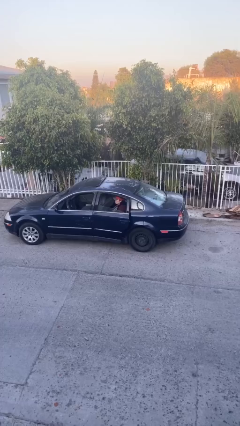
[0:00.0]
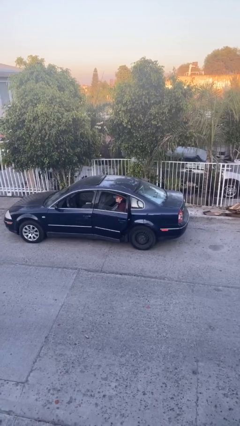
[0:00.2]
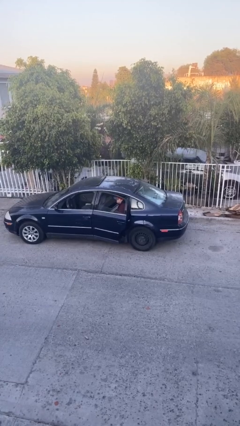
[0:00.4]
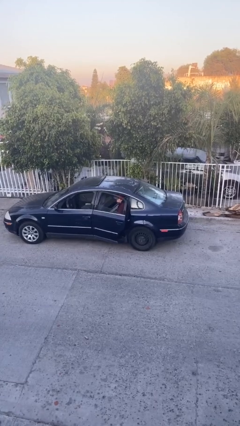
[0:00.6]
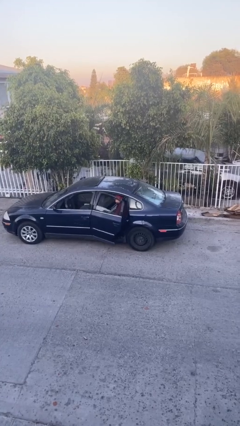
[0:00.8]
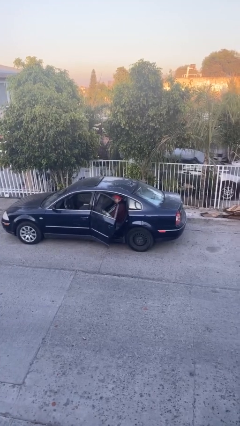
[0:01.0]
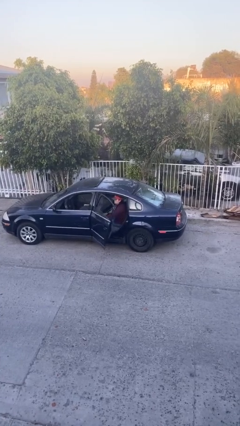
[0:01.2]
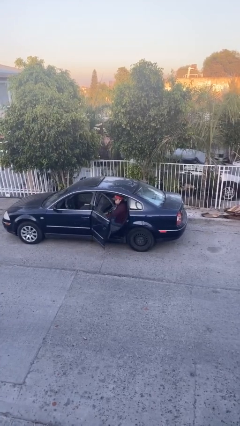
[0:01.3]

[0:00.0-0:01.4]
person opens car door

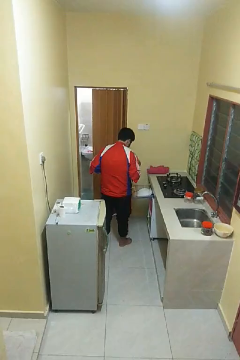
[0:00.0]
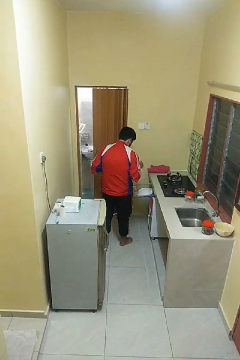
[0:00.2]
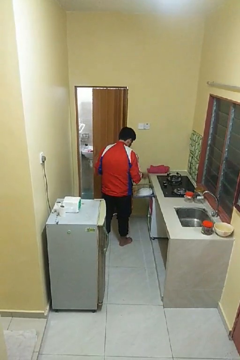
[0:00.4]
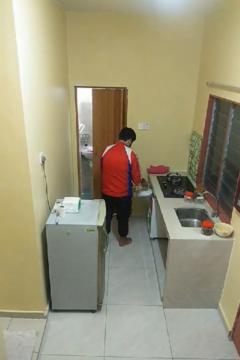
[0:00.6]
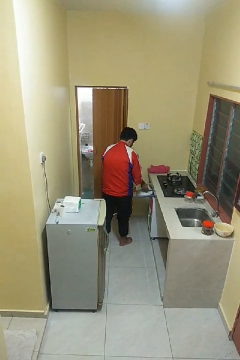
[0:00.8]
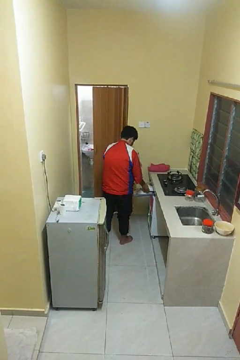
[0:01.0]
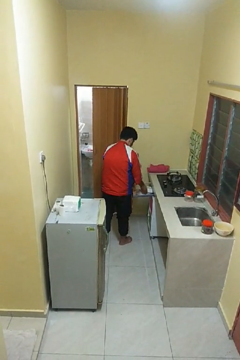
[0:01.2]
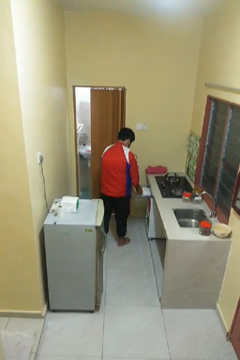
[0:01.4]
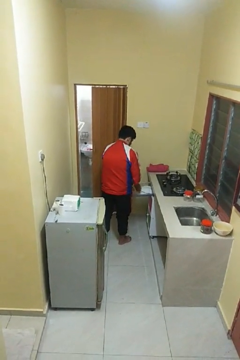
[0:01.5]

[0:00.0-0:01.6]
person puts object into kitchen drawer

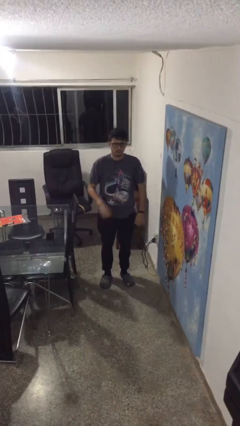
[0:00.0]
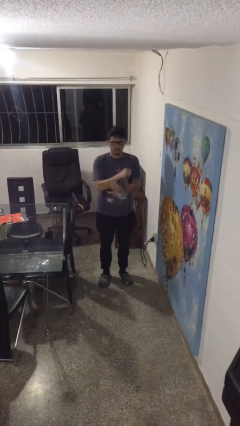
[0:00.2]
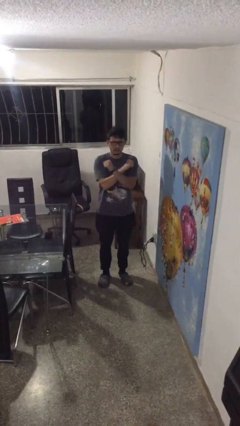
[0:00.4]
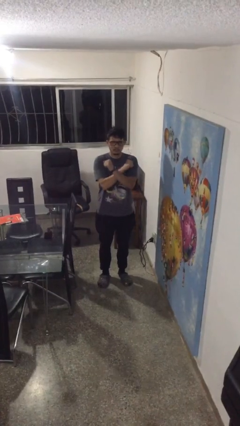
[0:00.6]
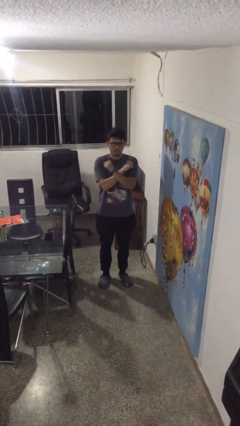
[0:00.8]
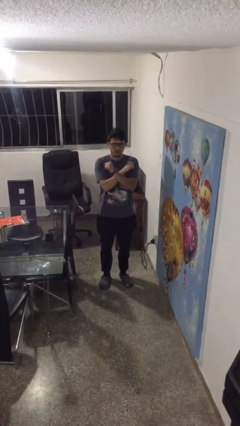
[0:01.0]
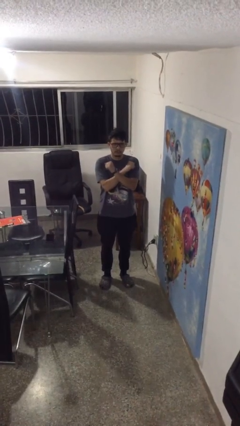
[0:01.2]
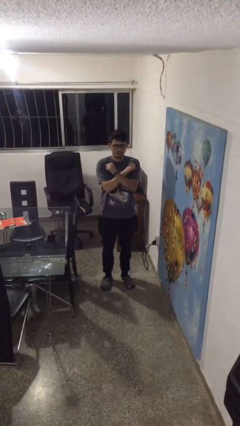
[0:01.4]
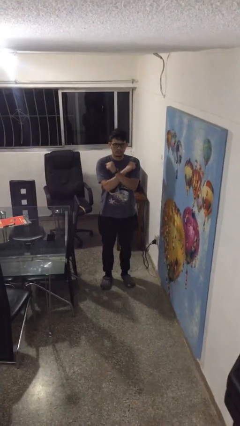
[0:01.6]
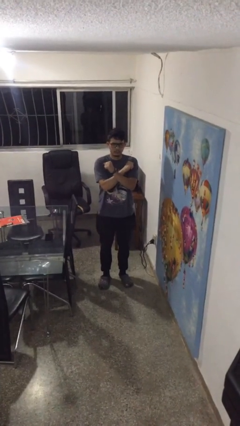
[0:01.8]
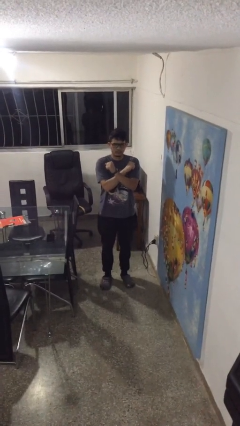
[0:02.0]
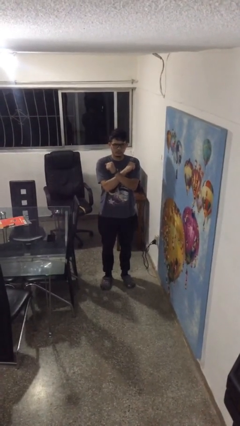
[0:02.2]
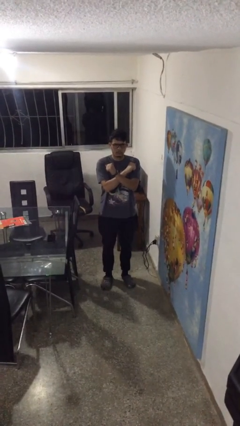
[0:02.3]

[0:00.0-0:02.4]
person gestures arms x

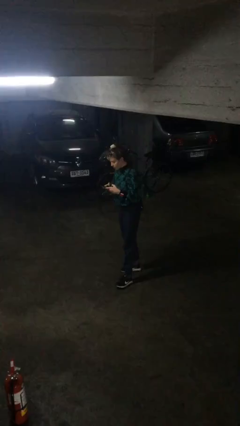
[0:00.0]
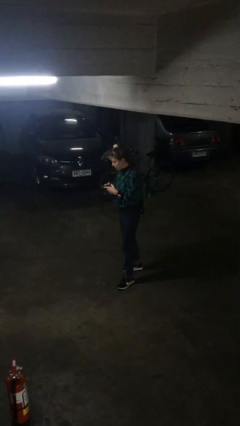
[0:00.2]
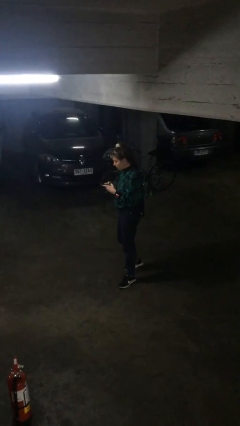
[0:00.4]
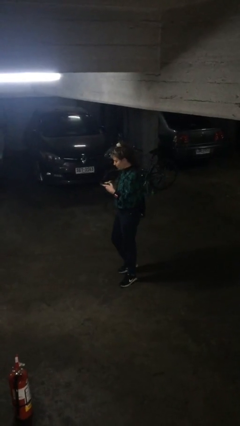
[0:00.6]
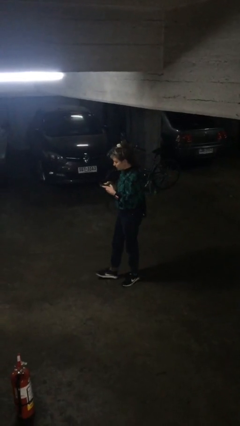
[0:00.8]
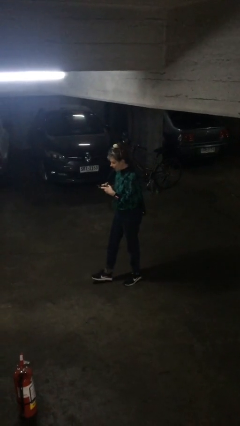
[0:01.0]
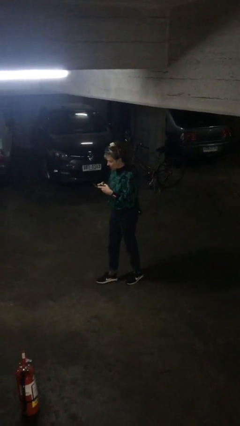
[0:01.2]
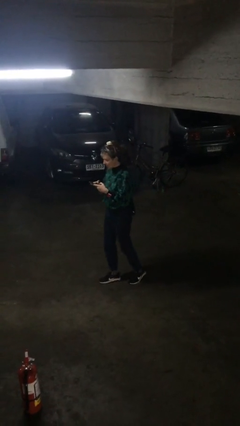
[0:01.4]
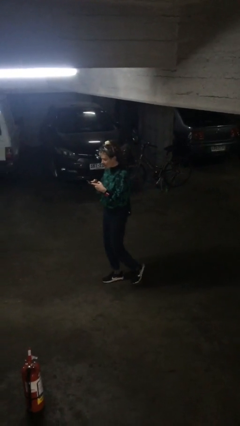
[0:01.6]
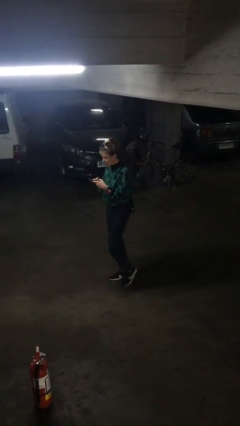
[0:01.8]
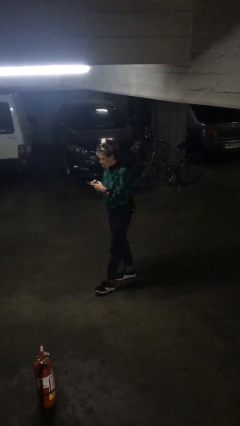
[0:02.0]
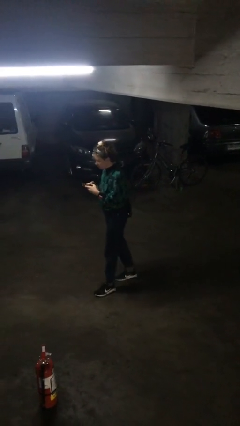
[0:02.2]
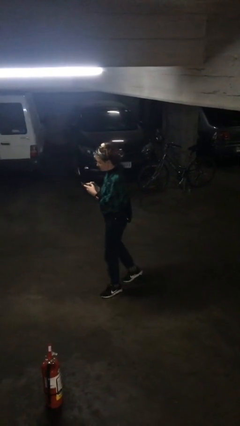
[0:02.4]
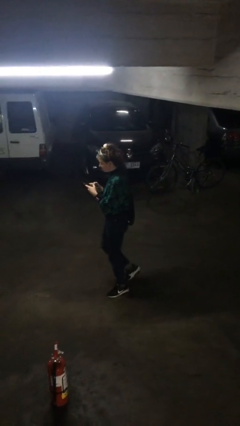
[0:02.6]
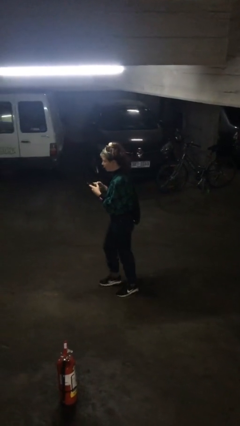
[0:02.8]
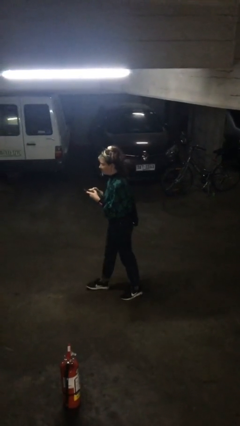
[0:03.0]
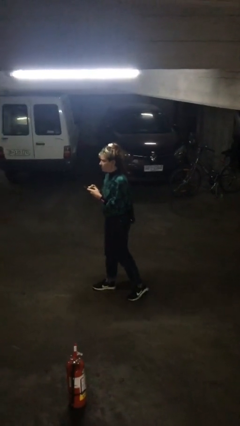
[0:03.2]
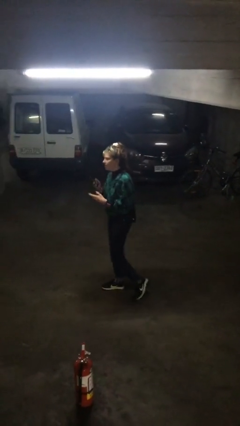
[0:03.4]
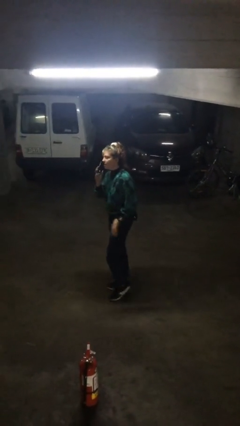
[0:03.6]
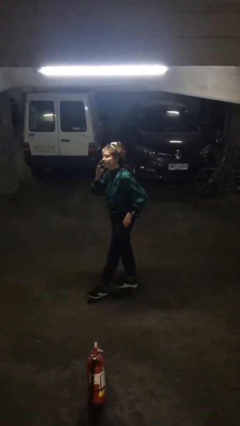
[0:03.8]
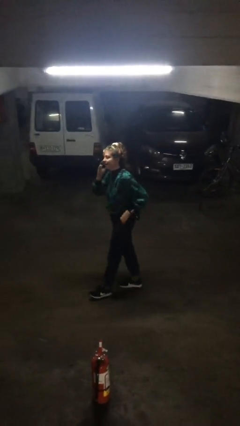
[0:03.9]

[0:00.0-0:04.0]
person texts on phone

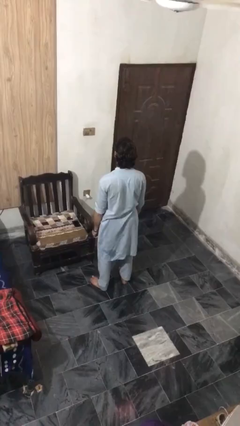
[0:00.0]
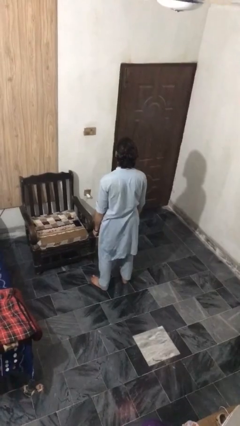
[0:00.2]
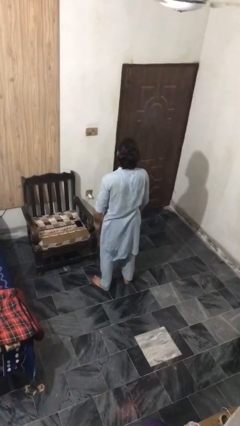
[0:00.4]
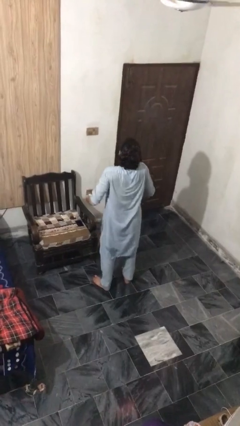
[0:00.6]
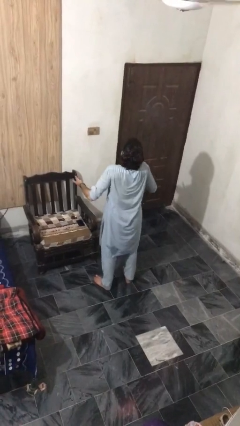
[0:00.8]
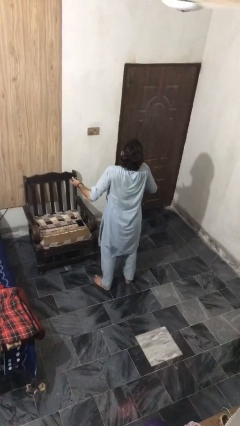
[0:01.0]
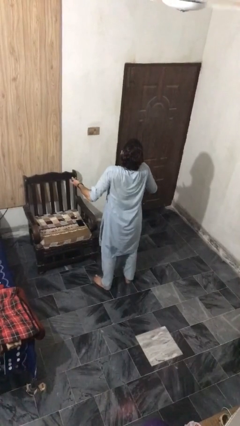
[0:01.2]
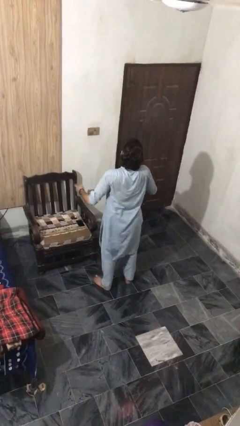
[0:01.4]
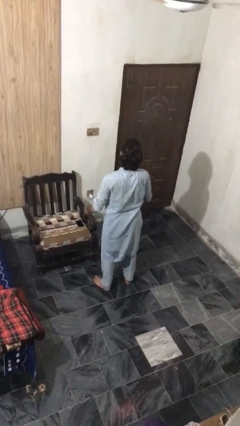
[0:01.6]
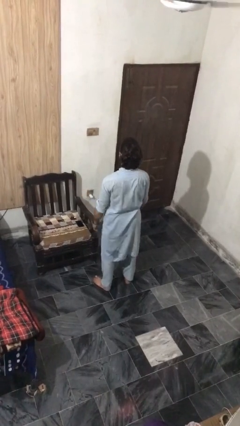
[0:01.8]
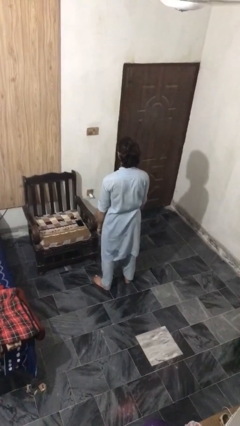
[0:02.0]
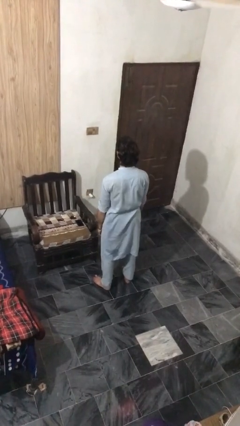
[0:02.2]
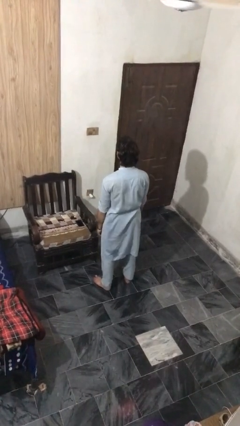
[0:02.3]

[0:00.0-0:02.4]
person shrugs

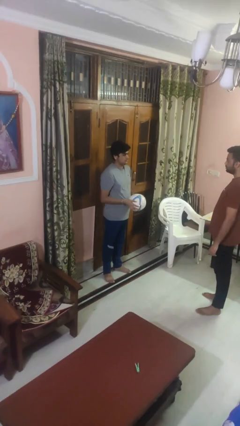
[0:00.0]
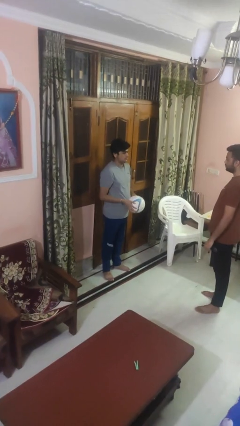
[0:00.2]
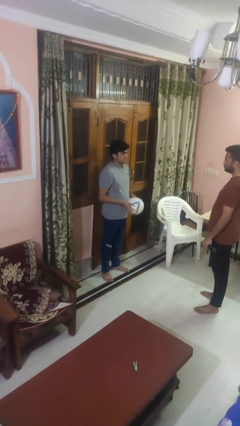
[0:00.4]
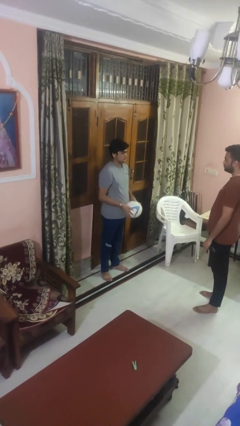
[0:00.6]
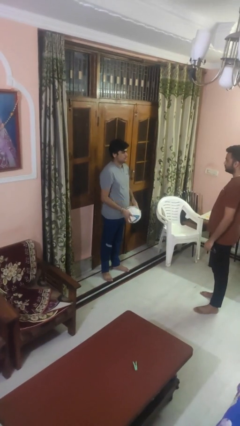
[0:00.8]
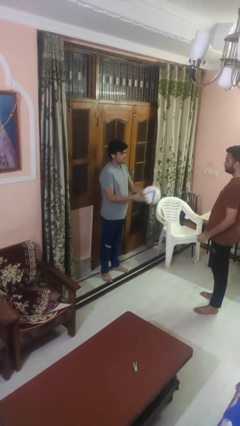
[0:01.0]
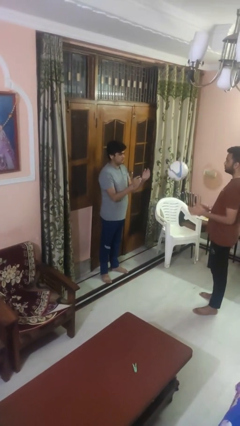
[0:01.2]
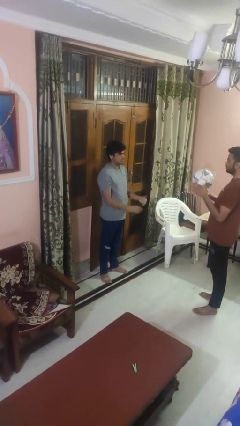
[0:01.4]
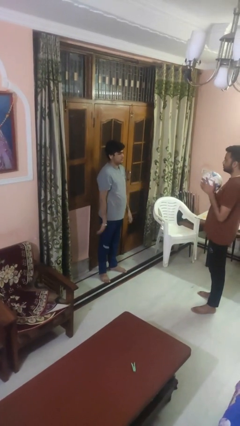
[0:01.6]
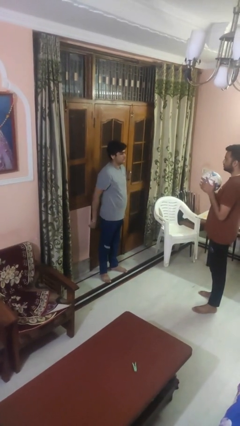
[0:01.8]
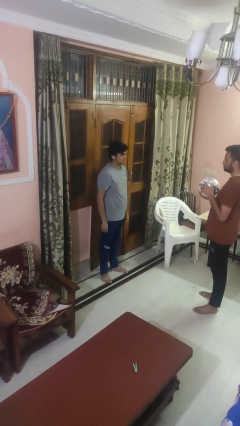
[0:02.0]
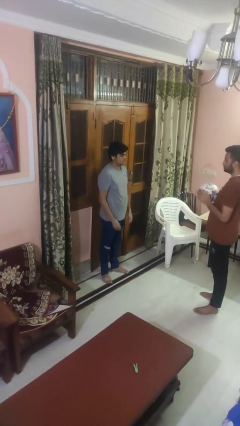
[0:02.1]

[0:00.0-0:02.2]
person throws object to person

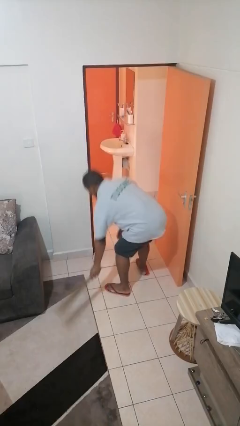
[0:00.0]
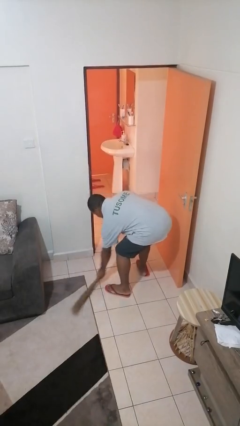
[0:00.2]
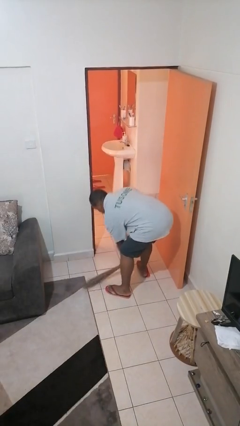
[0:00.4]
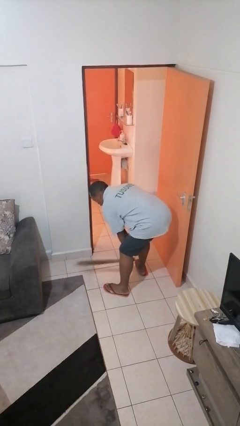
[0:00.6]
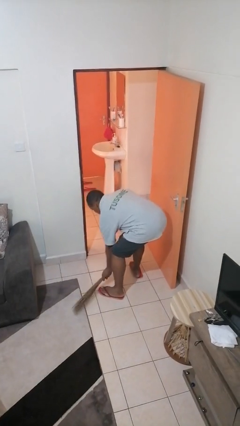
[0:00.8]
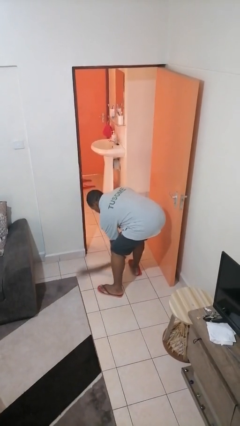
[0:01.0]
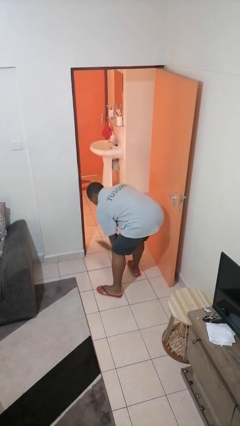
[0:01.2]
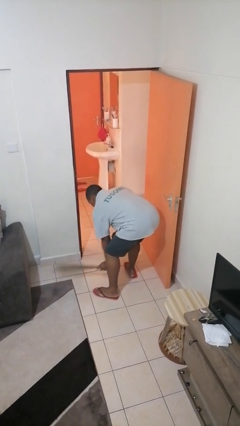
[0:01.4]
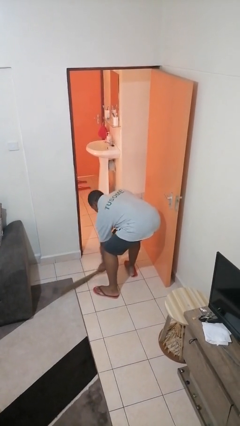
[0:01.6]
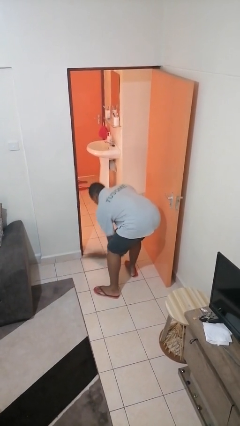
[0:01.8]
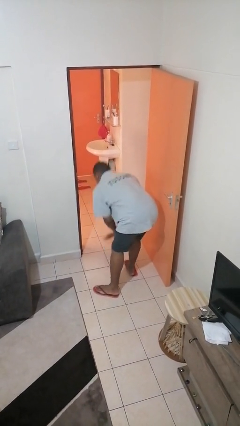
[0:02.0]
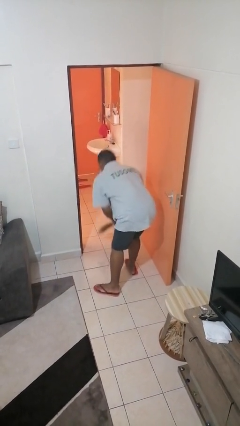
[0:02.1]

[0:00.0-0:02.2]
person sweeps floor

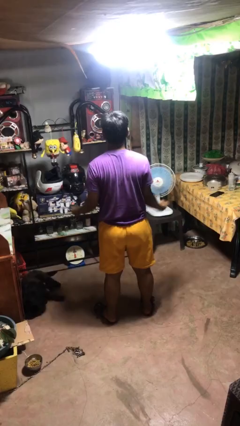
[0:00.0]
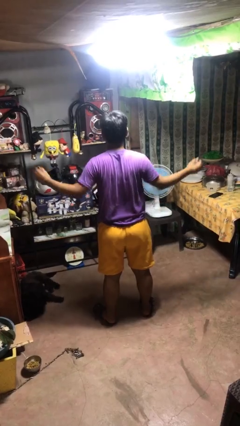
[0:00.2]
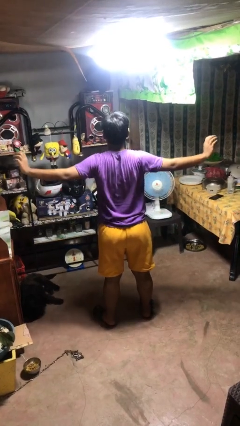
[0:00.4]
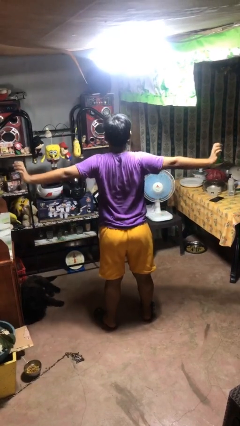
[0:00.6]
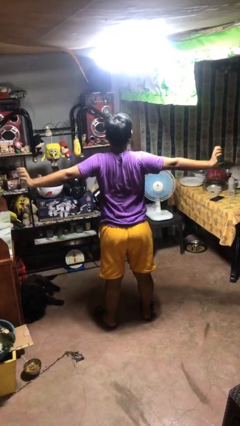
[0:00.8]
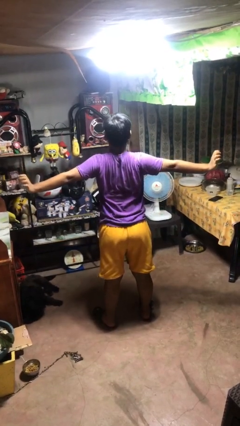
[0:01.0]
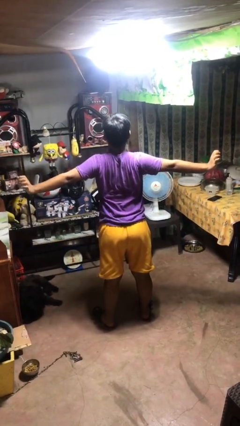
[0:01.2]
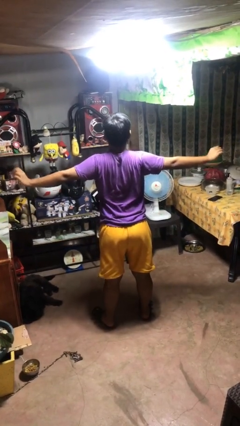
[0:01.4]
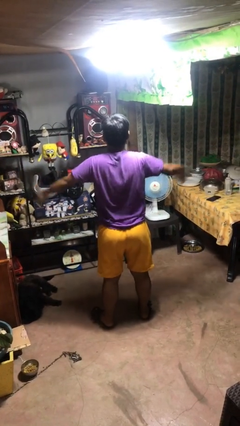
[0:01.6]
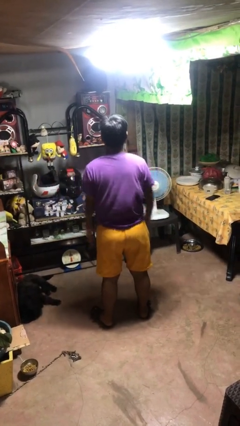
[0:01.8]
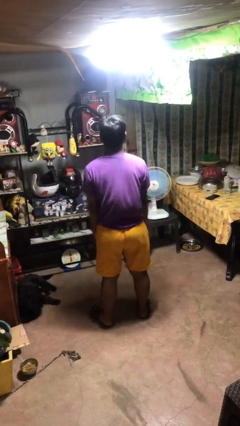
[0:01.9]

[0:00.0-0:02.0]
person stretches arms to side
